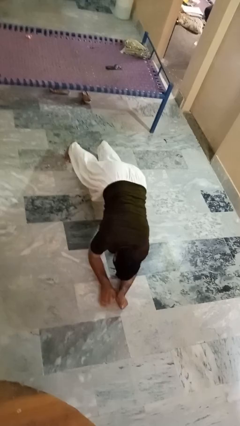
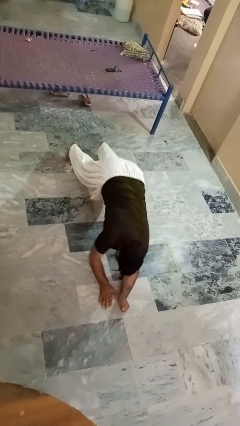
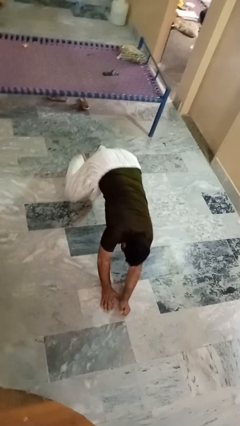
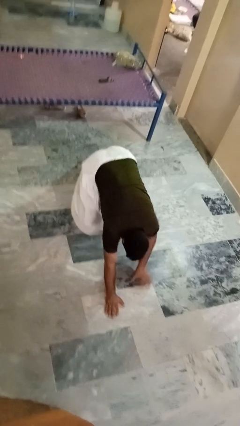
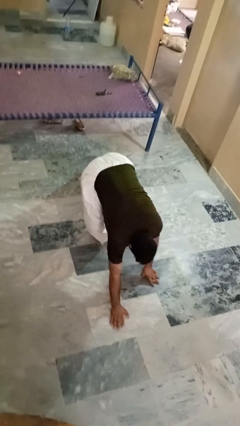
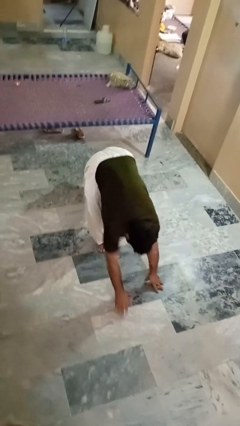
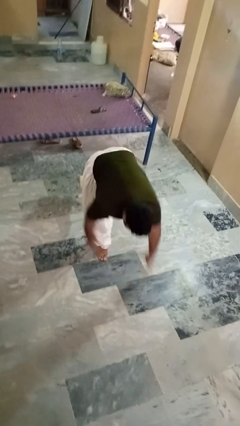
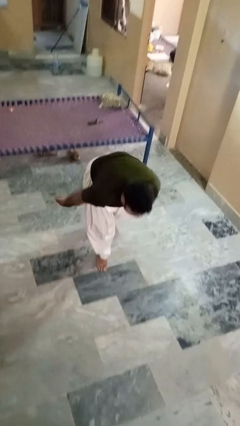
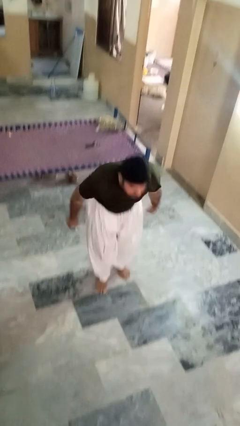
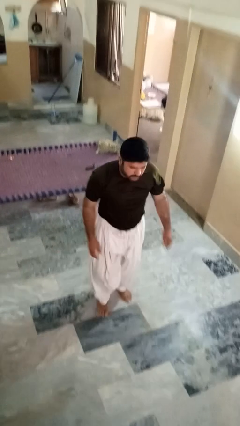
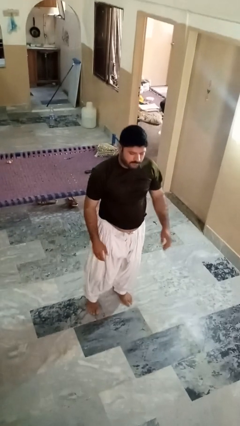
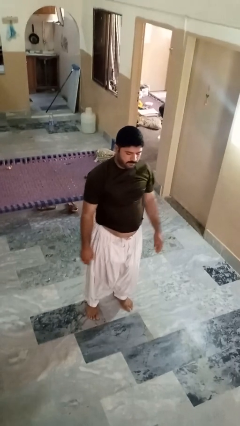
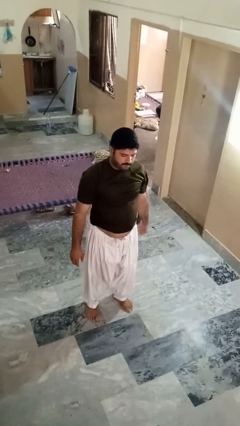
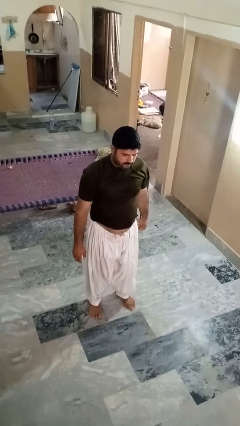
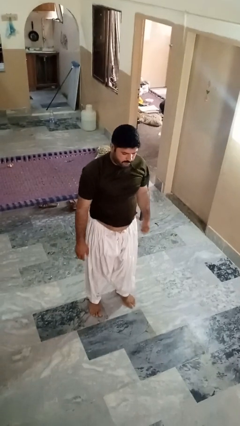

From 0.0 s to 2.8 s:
person stands up from floor

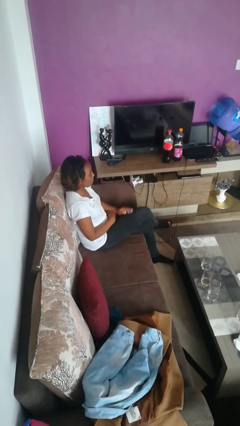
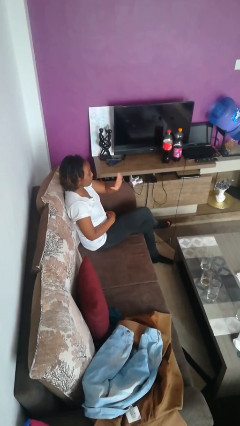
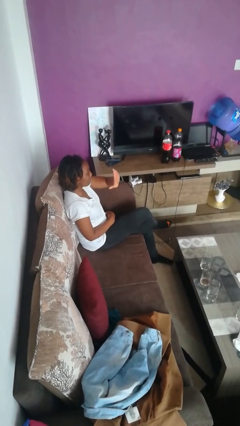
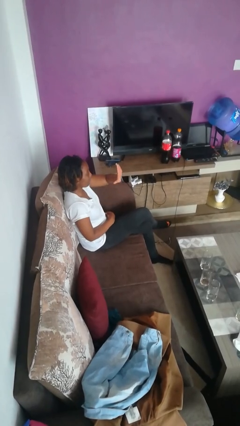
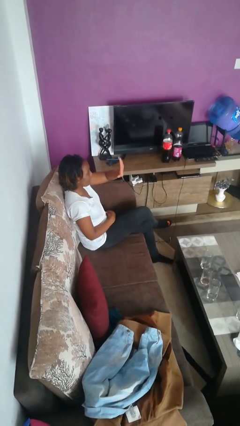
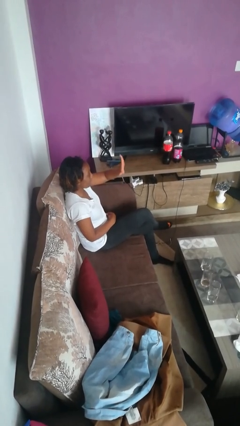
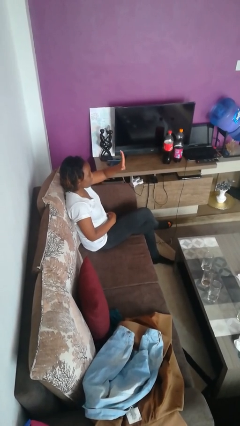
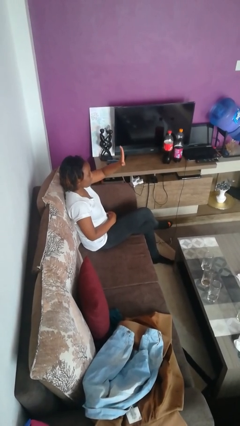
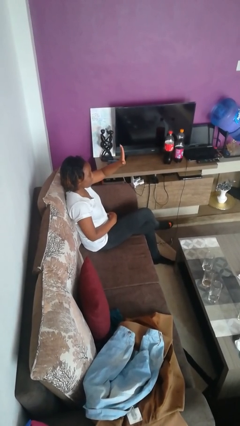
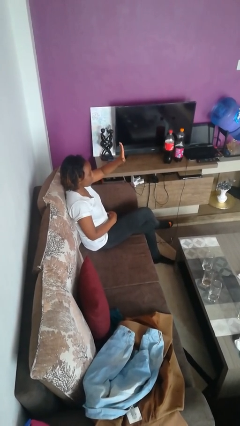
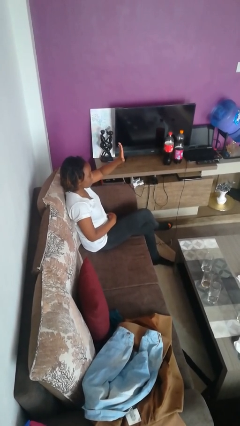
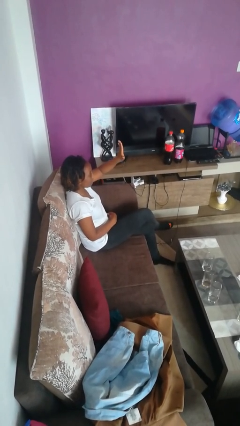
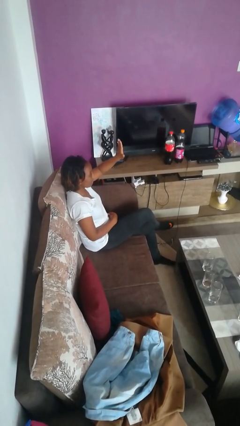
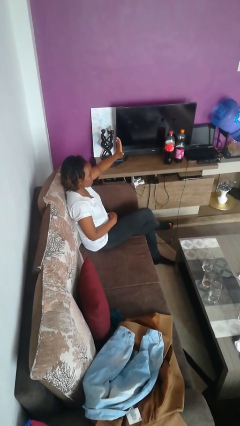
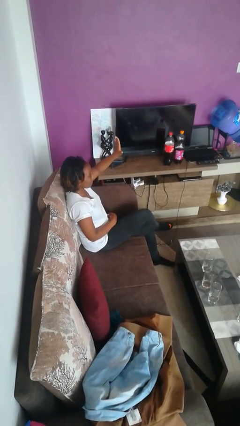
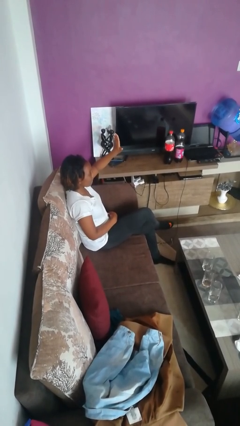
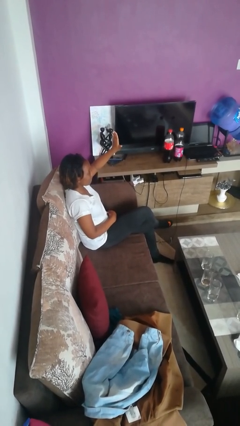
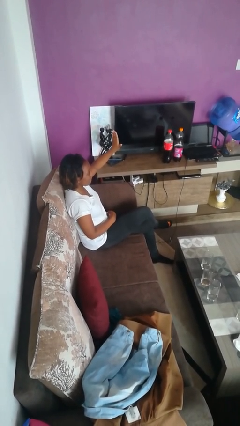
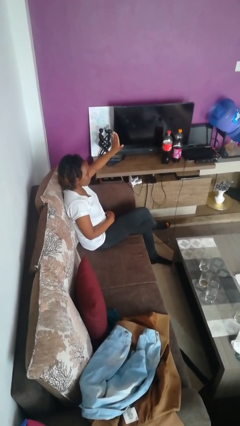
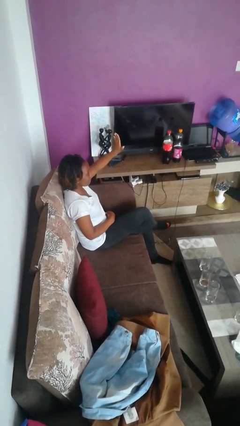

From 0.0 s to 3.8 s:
person gestures swipe left

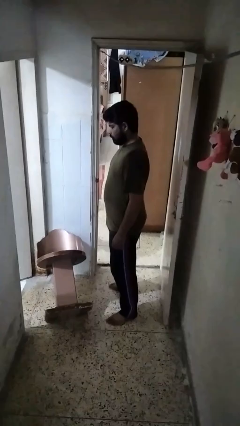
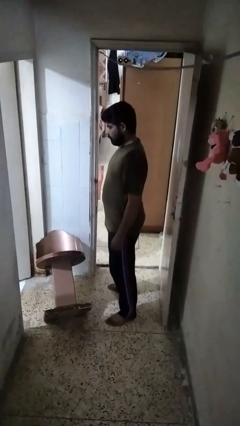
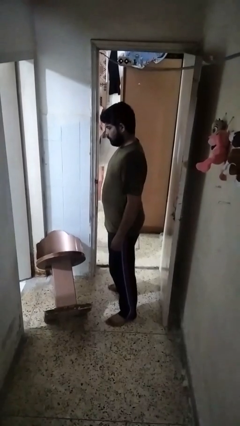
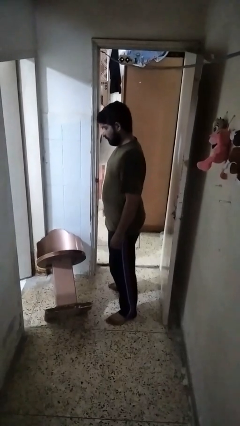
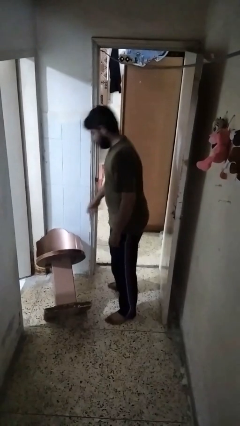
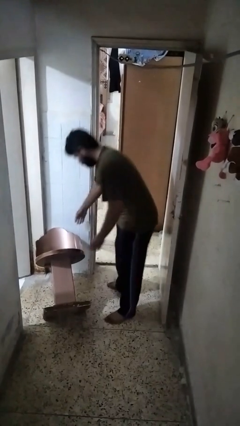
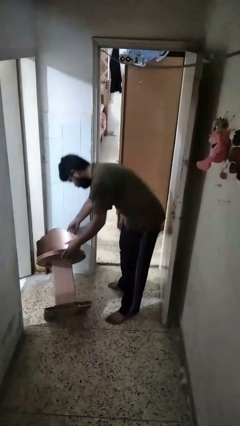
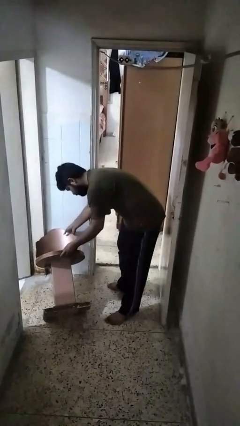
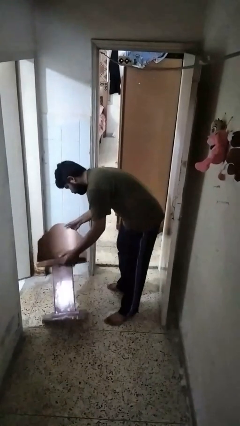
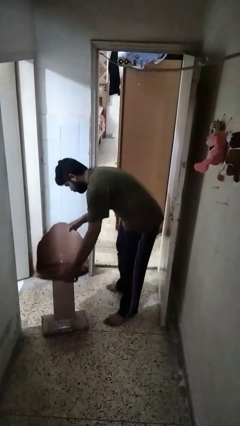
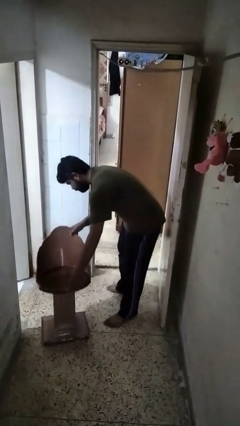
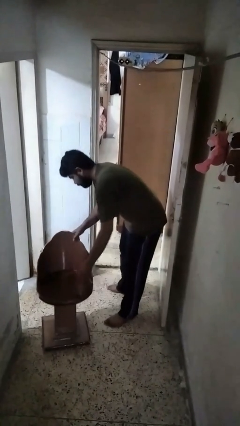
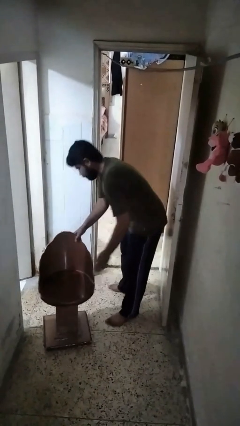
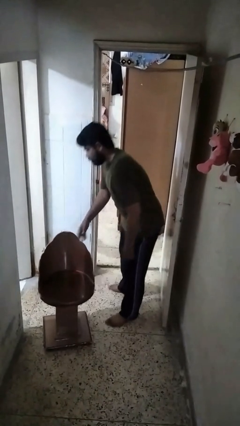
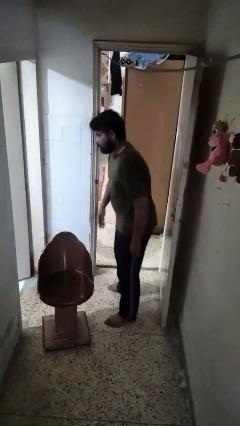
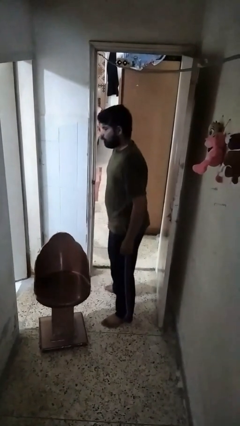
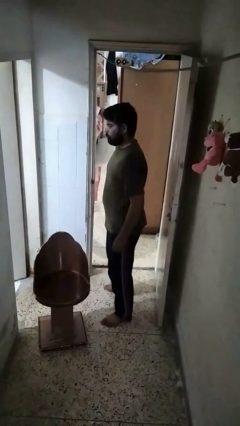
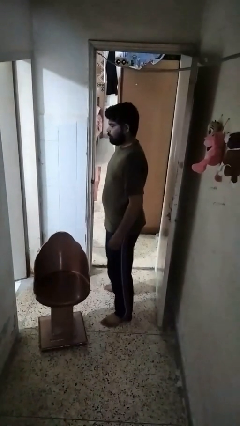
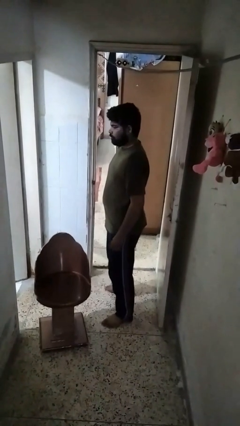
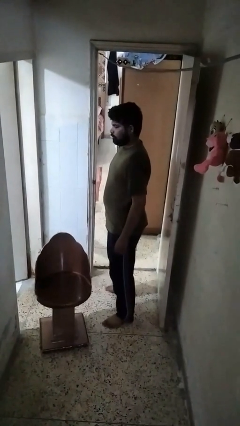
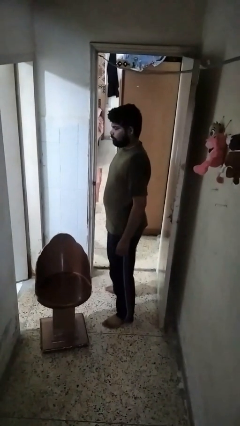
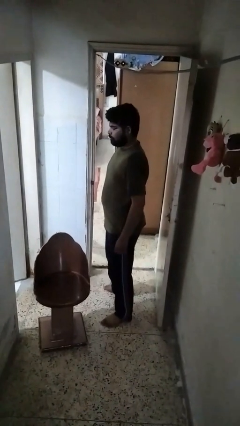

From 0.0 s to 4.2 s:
person sets upright furniture

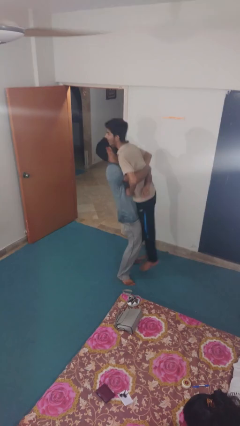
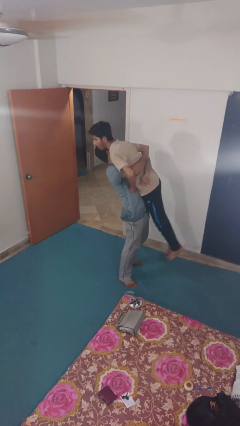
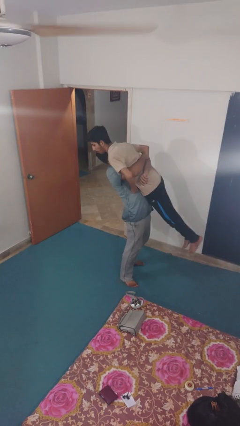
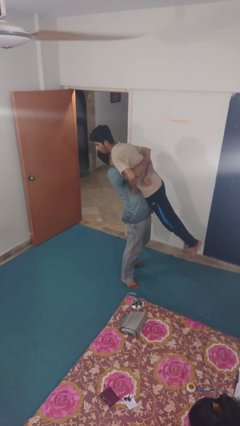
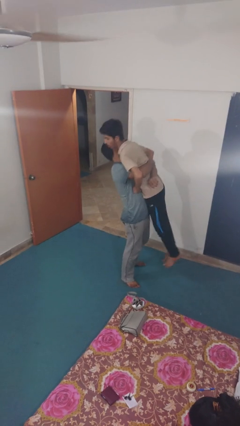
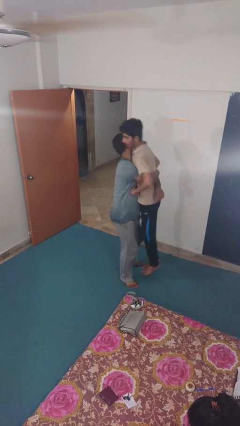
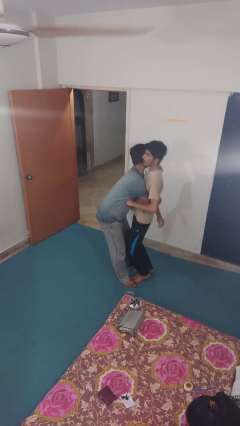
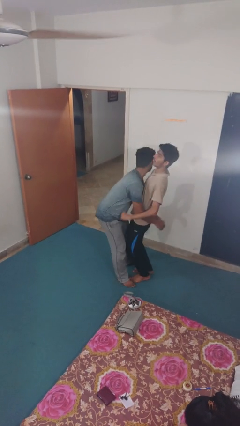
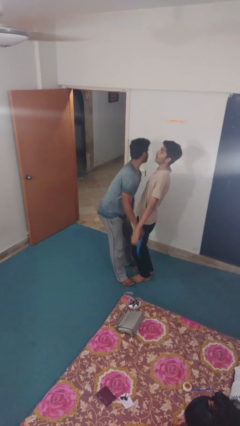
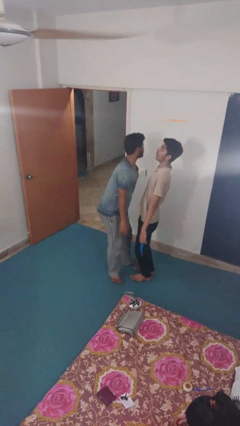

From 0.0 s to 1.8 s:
person puts down person

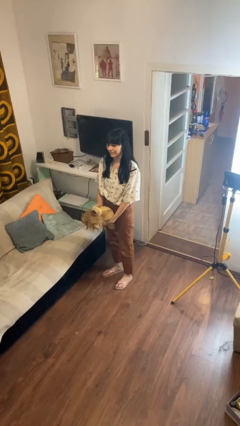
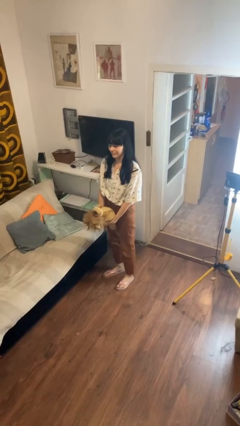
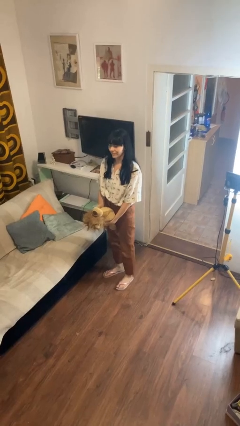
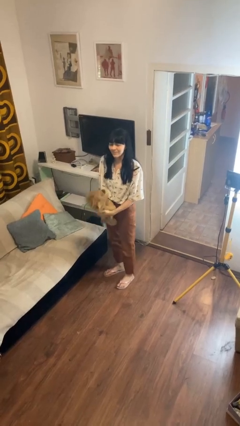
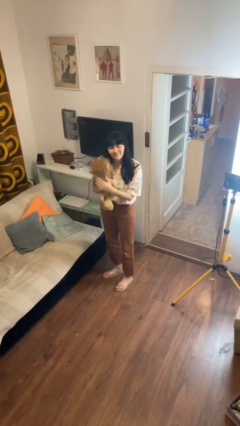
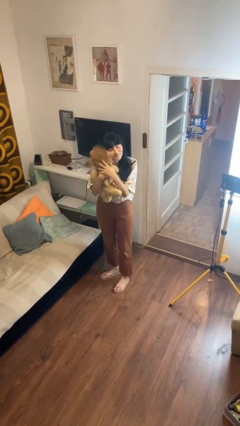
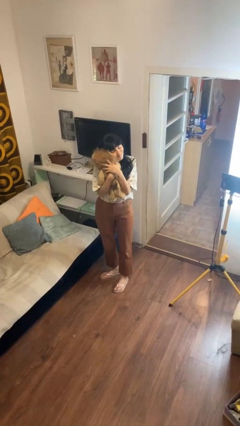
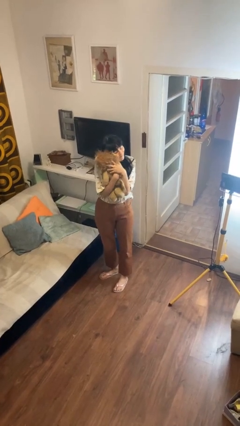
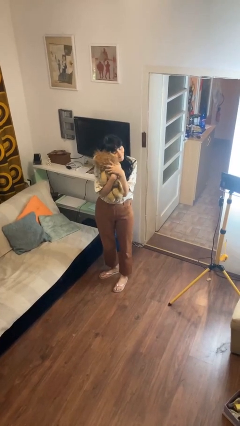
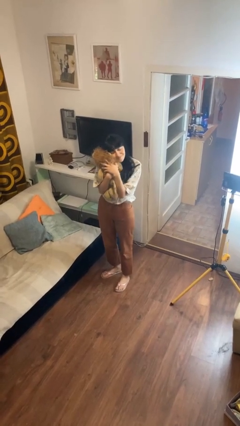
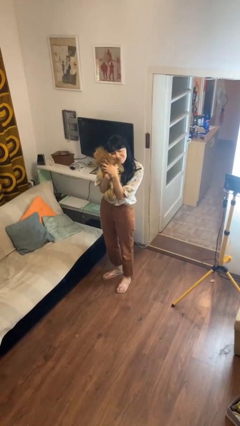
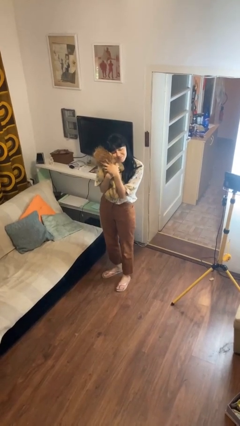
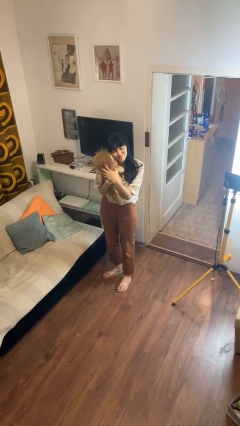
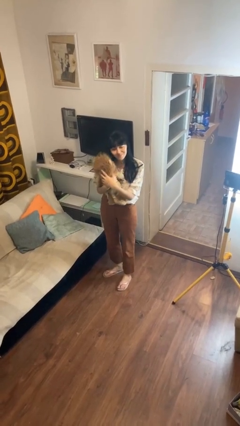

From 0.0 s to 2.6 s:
person hugs stuffed animal

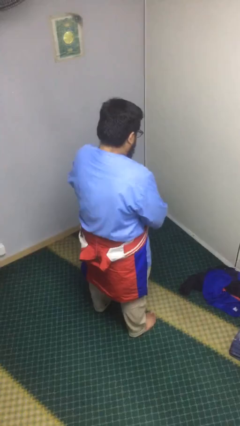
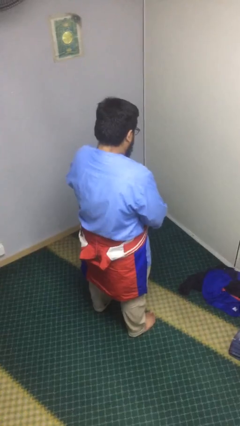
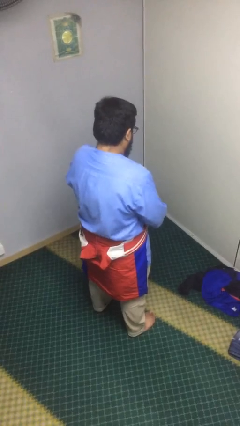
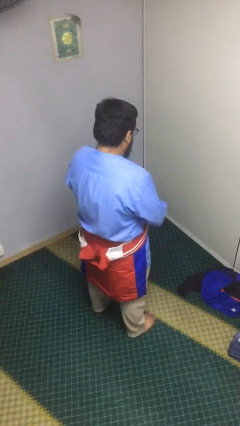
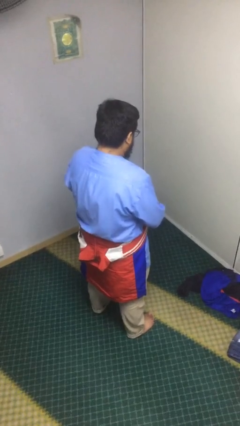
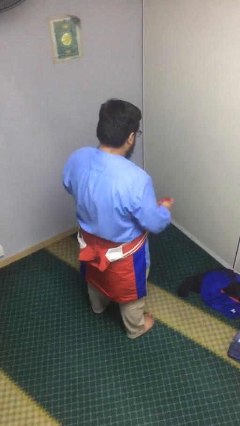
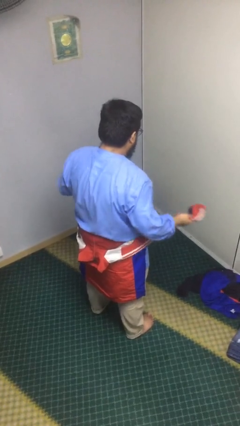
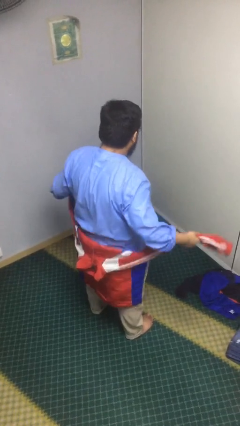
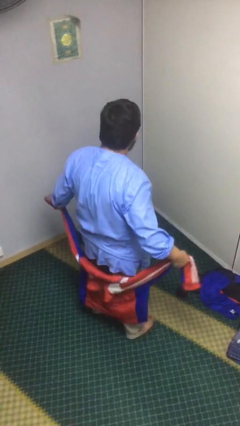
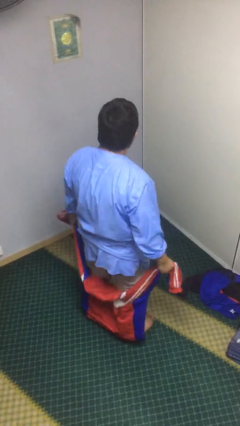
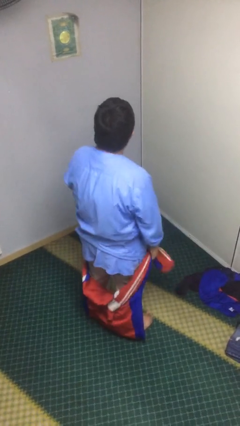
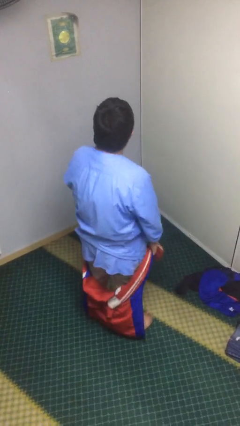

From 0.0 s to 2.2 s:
person unties jacket around waist
